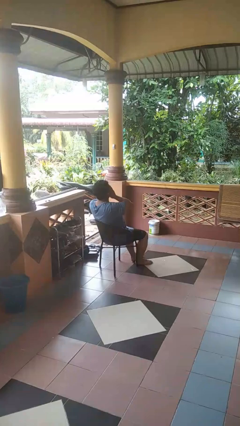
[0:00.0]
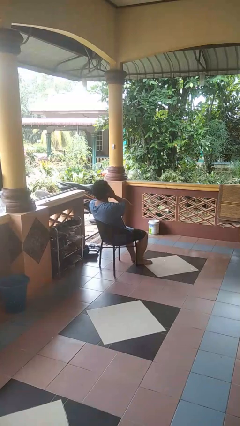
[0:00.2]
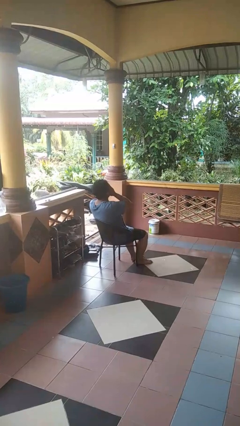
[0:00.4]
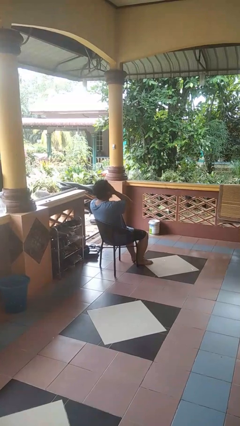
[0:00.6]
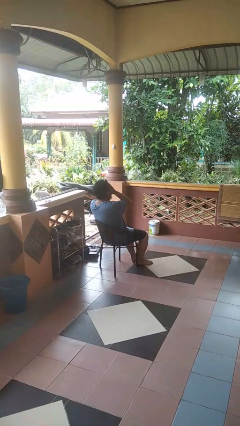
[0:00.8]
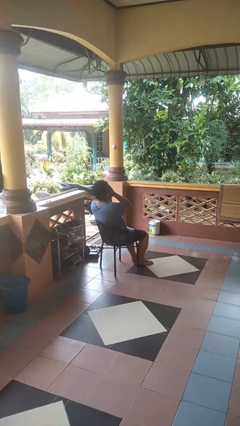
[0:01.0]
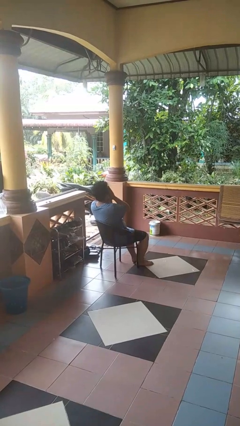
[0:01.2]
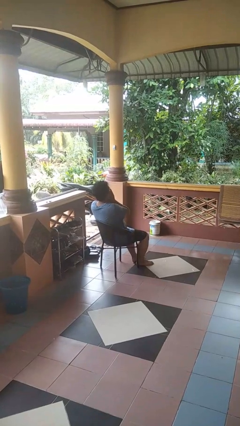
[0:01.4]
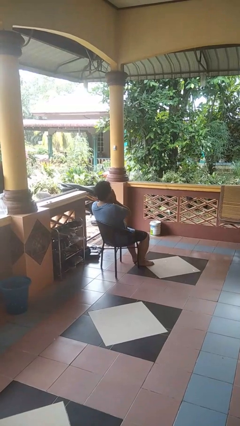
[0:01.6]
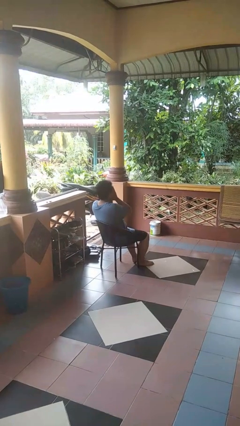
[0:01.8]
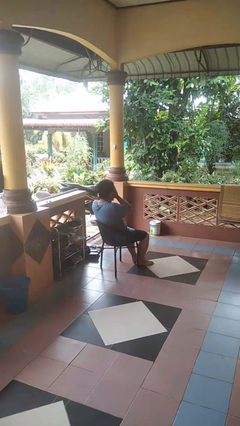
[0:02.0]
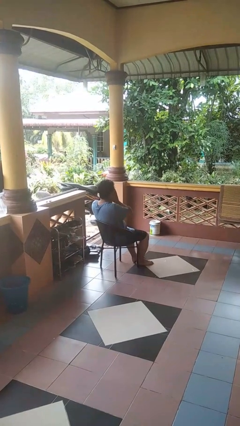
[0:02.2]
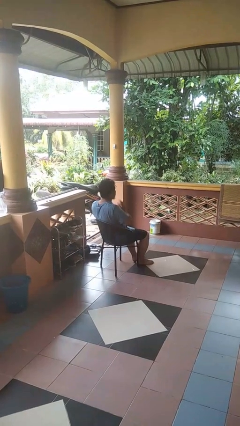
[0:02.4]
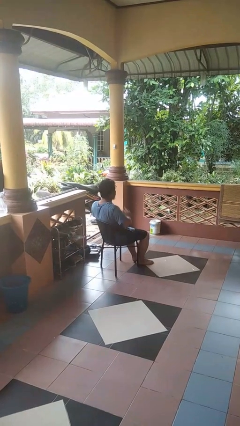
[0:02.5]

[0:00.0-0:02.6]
person rubs eyes

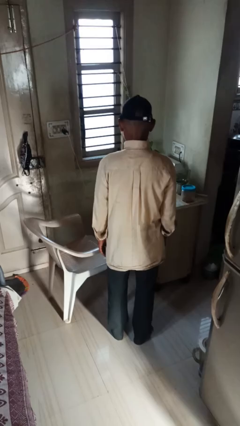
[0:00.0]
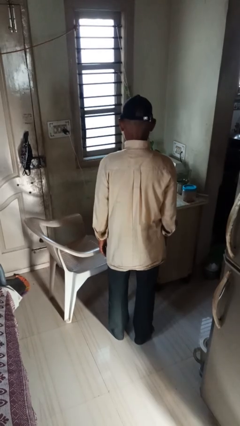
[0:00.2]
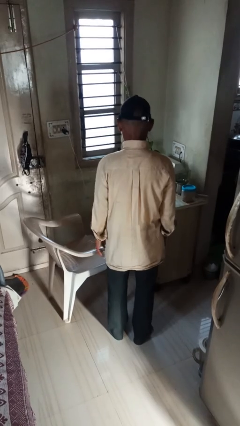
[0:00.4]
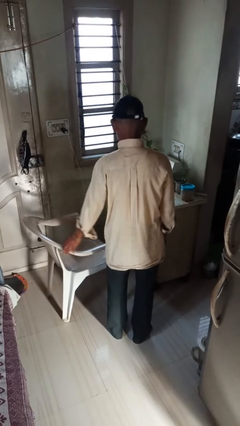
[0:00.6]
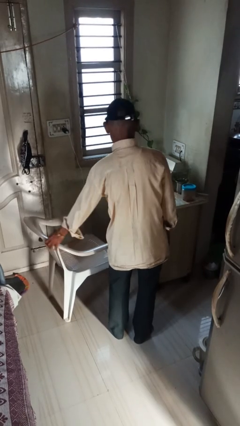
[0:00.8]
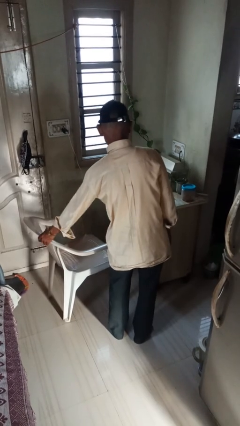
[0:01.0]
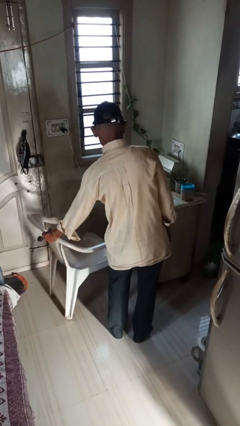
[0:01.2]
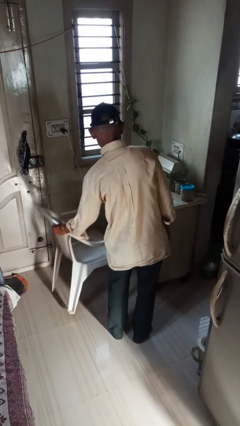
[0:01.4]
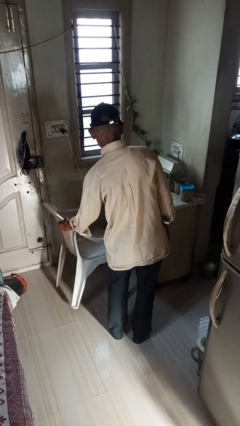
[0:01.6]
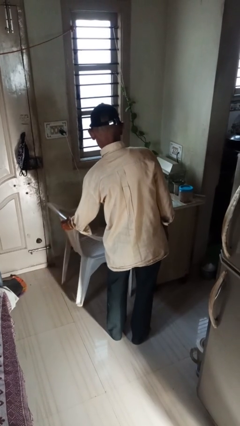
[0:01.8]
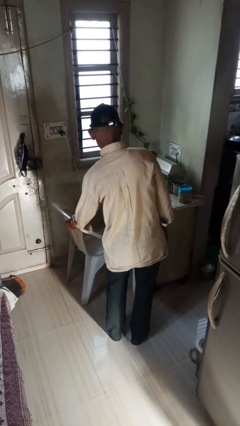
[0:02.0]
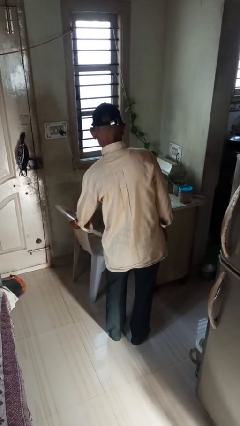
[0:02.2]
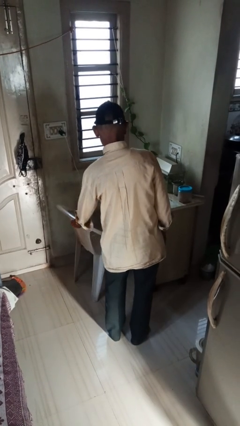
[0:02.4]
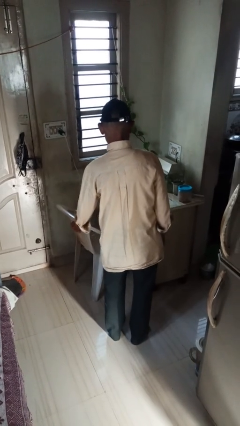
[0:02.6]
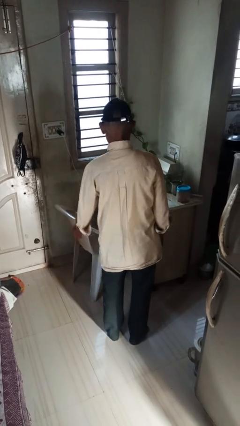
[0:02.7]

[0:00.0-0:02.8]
person pushes in chair

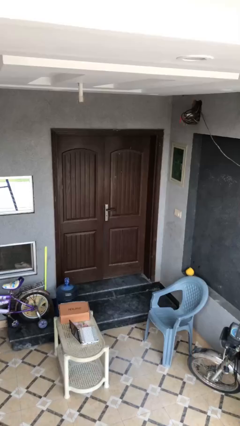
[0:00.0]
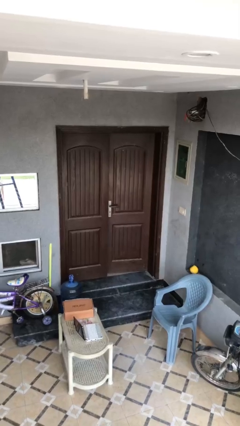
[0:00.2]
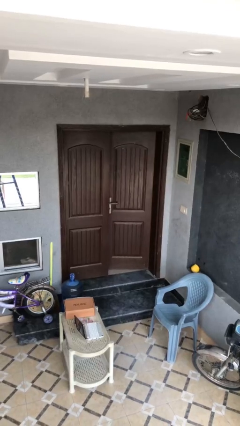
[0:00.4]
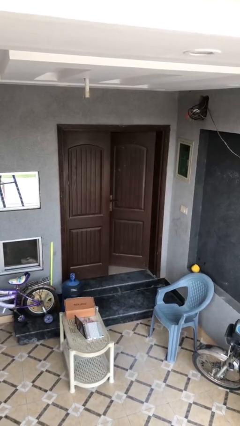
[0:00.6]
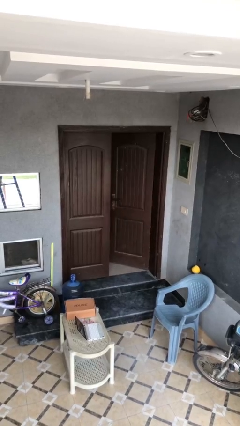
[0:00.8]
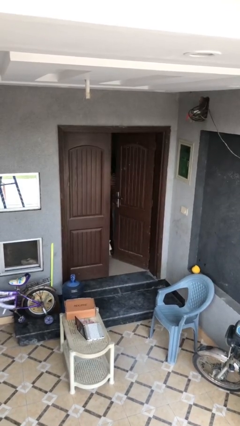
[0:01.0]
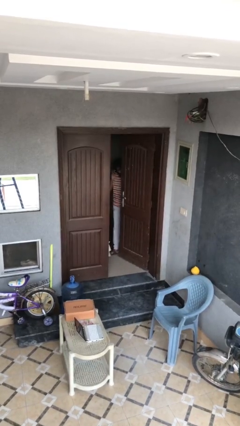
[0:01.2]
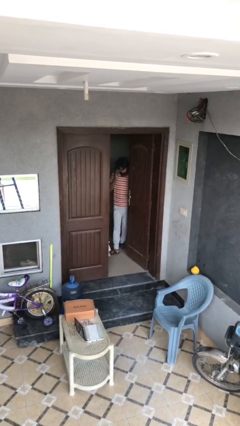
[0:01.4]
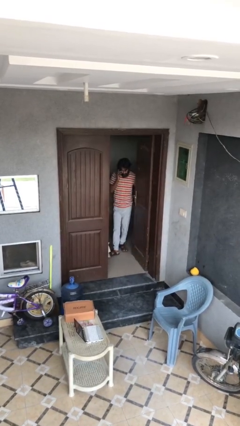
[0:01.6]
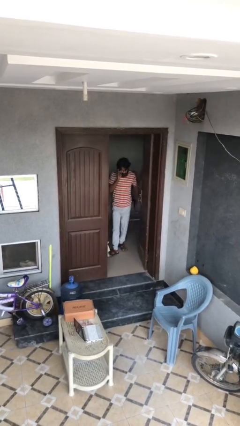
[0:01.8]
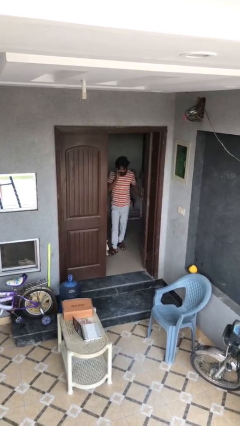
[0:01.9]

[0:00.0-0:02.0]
person opens facility door

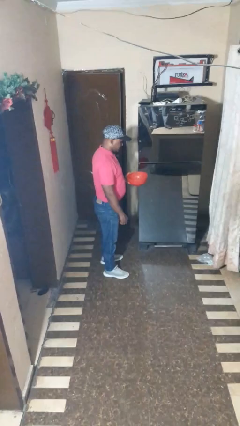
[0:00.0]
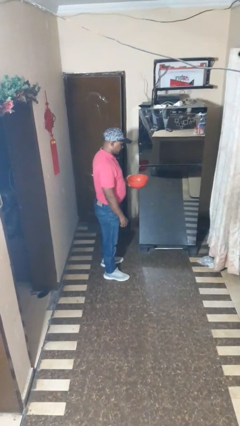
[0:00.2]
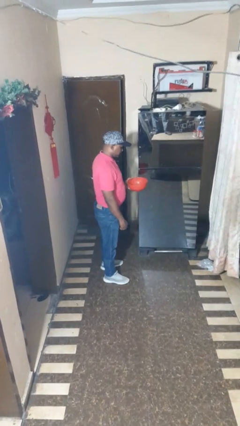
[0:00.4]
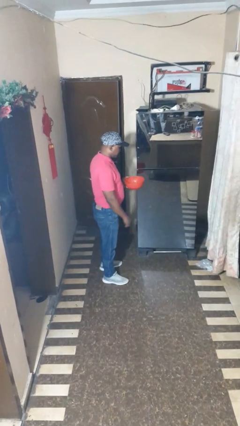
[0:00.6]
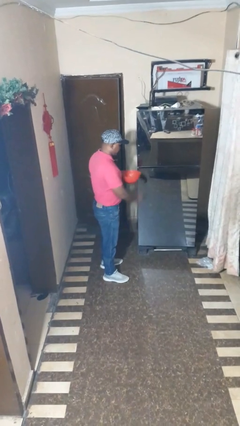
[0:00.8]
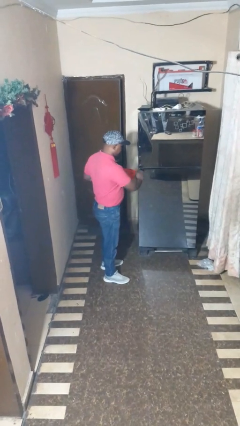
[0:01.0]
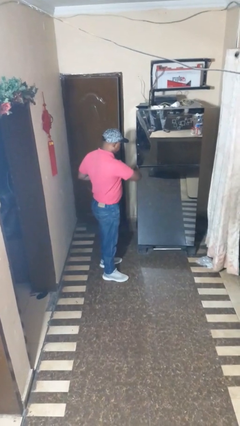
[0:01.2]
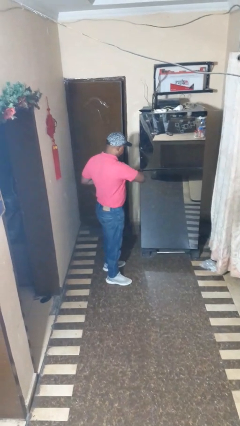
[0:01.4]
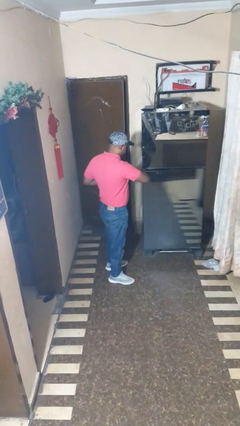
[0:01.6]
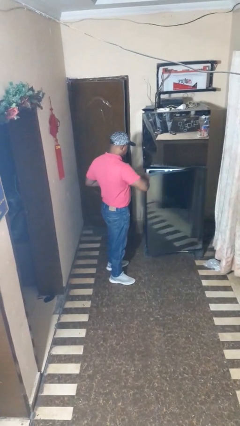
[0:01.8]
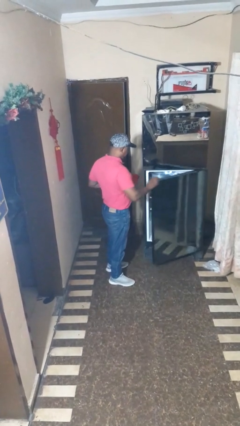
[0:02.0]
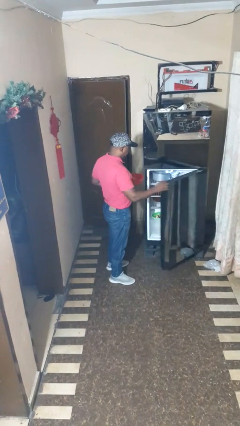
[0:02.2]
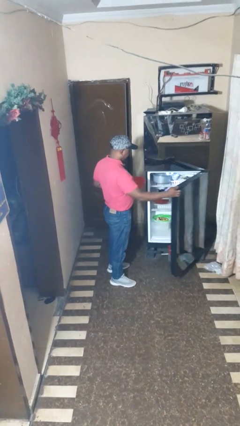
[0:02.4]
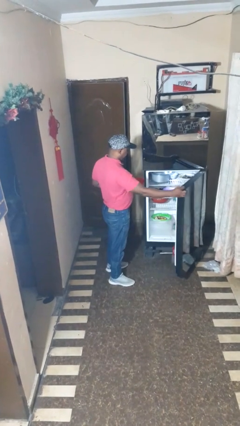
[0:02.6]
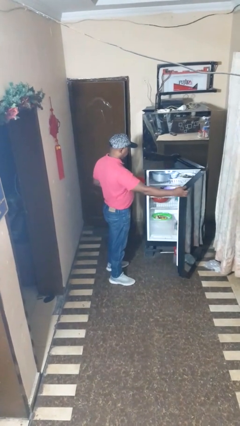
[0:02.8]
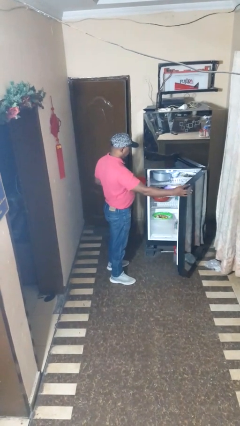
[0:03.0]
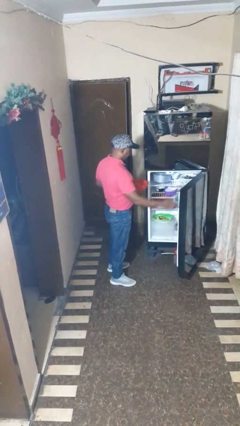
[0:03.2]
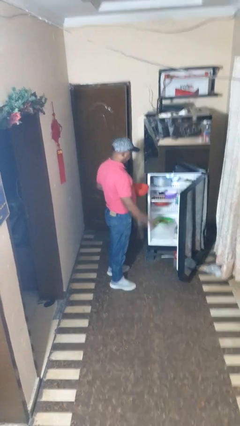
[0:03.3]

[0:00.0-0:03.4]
person opens refrigerator

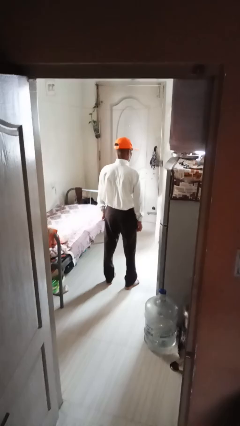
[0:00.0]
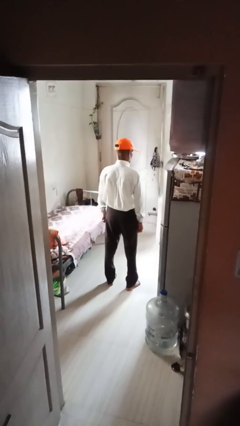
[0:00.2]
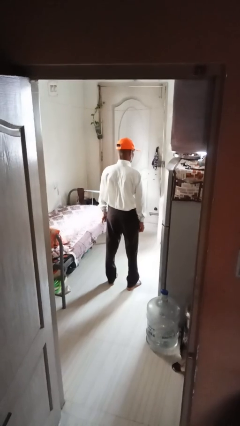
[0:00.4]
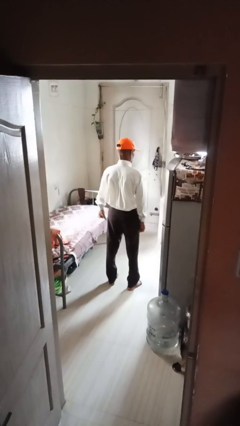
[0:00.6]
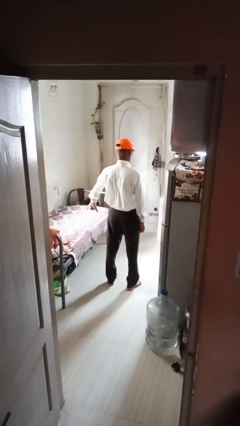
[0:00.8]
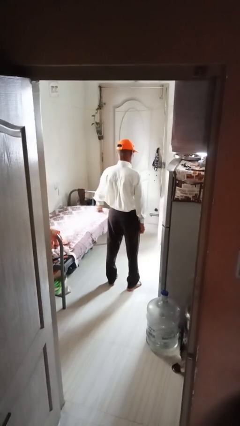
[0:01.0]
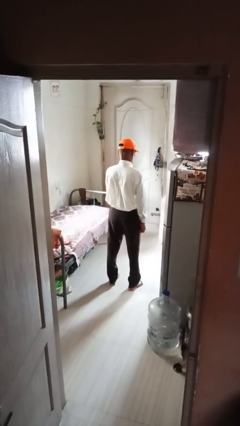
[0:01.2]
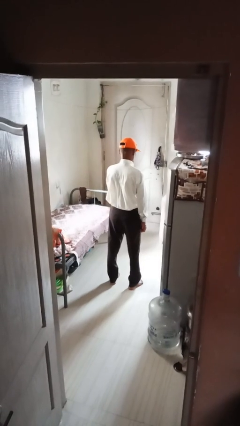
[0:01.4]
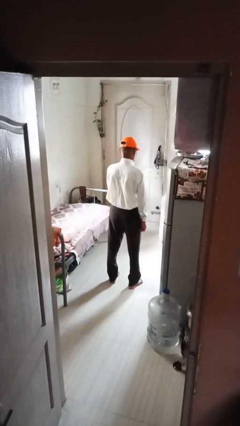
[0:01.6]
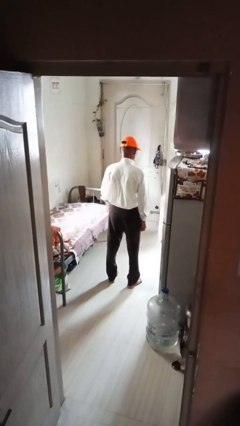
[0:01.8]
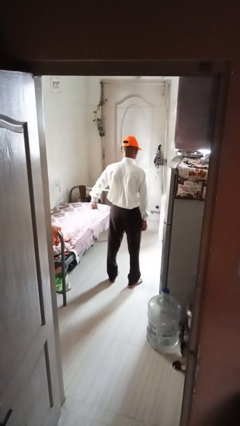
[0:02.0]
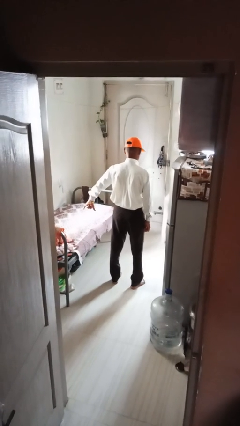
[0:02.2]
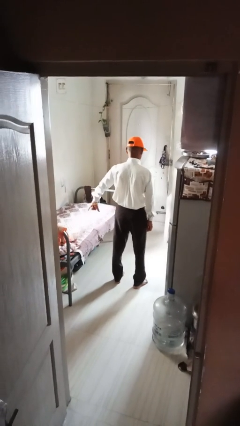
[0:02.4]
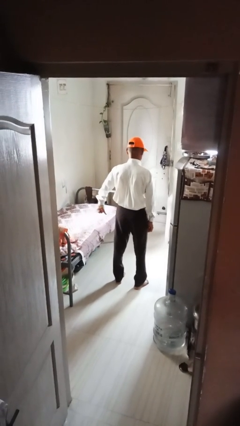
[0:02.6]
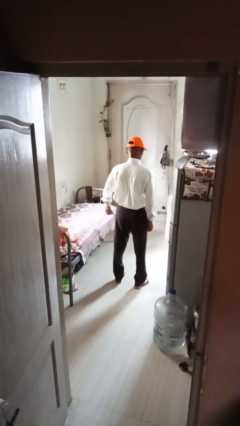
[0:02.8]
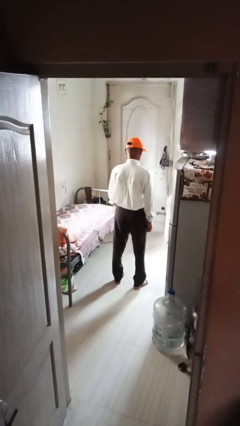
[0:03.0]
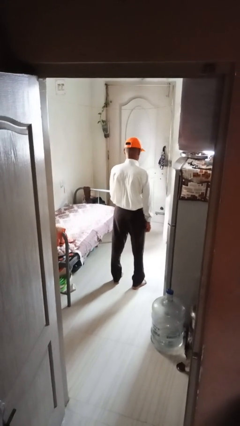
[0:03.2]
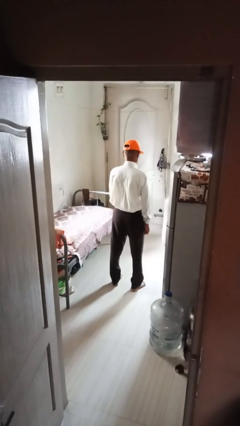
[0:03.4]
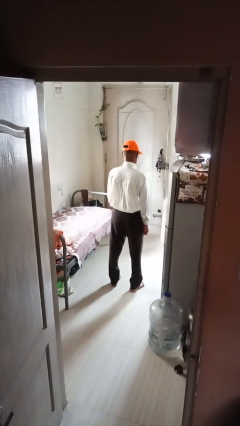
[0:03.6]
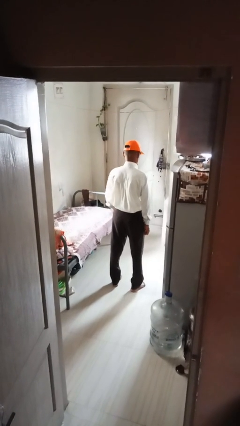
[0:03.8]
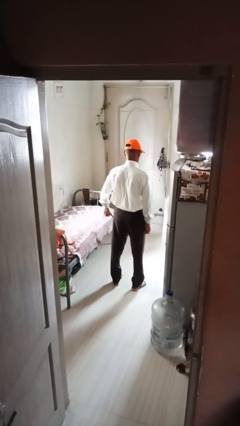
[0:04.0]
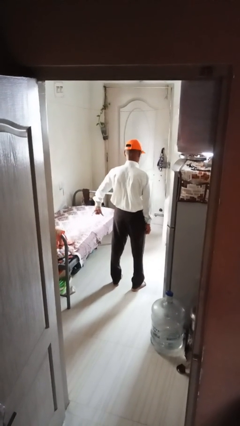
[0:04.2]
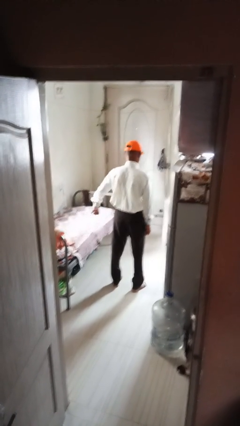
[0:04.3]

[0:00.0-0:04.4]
person gestures hang loose

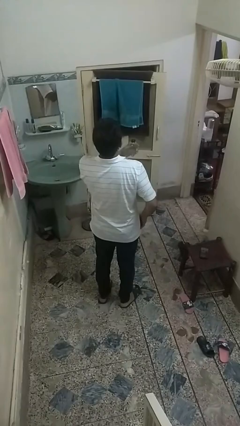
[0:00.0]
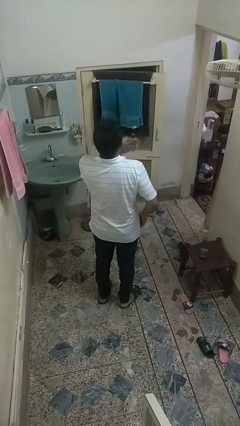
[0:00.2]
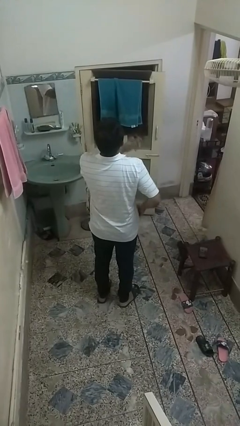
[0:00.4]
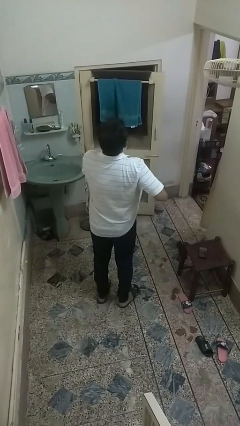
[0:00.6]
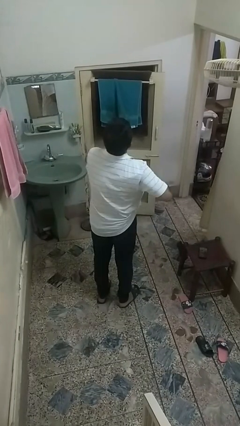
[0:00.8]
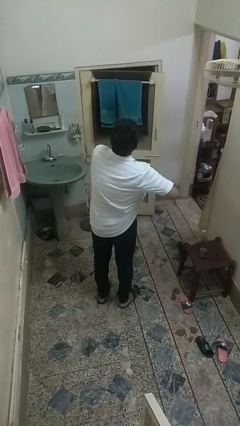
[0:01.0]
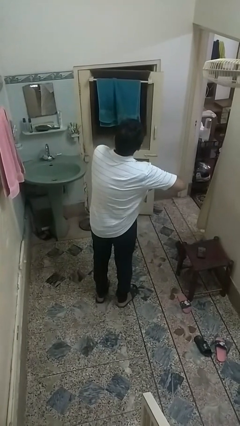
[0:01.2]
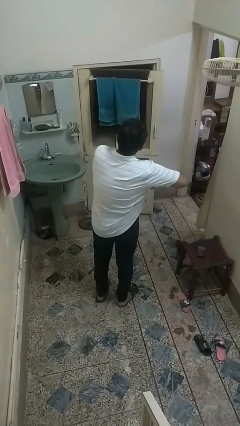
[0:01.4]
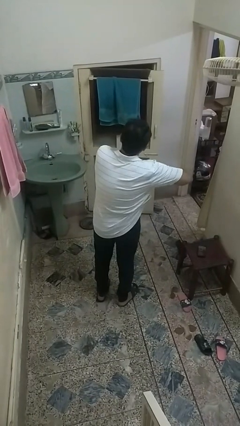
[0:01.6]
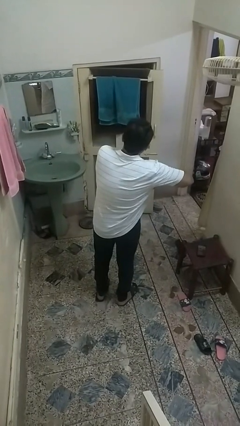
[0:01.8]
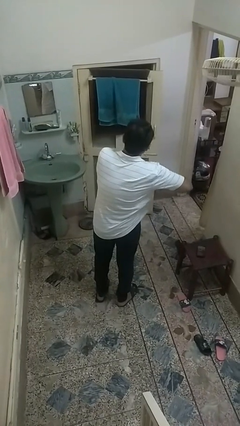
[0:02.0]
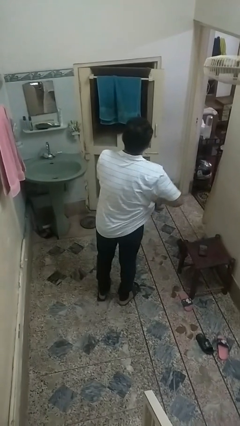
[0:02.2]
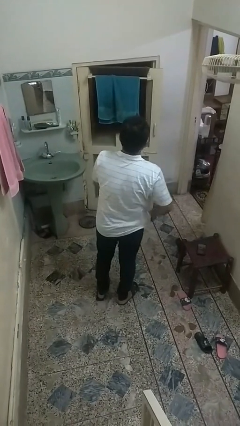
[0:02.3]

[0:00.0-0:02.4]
person applies deodorant
